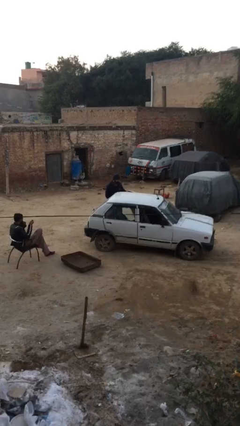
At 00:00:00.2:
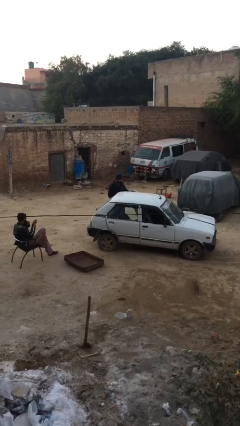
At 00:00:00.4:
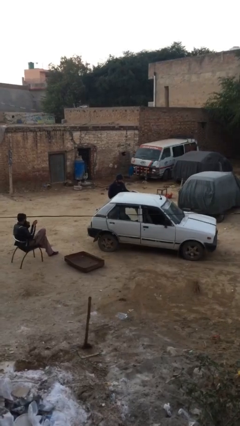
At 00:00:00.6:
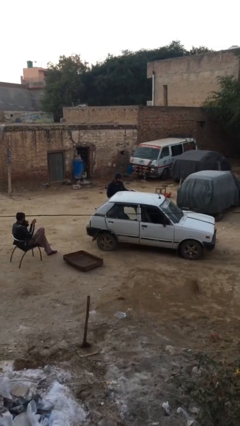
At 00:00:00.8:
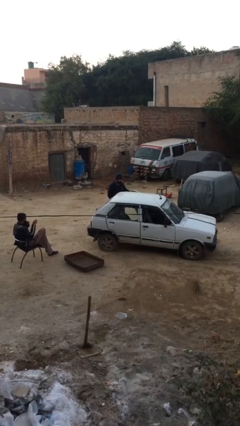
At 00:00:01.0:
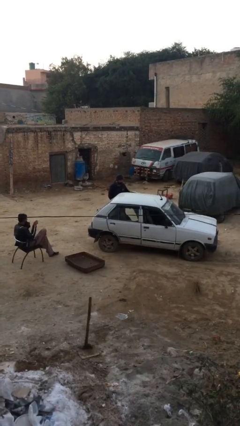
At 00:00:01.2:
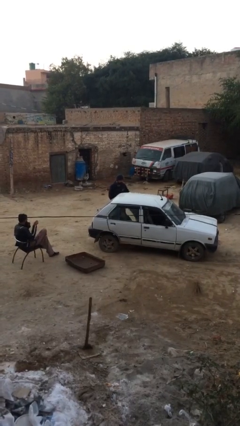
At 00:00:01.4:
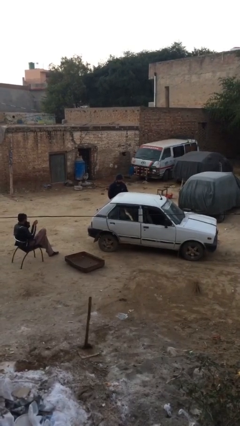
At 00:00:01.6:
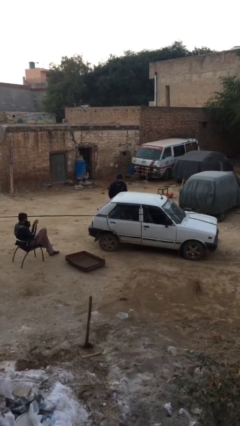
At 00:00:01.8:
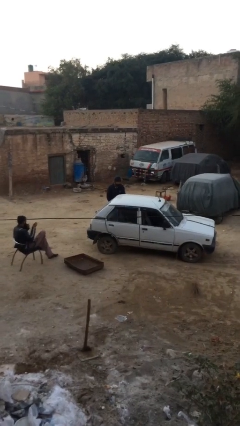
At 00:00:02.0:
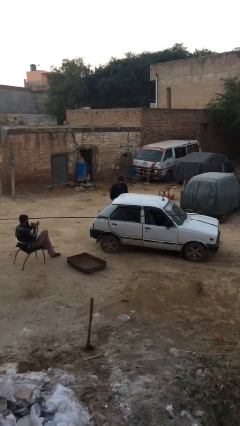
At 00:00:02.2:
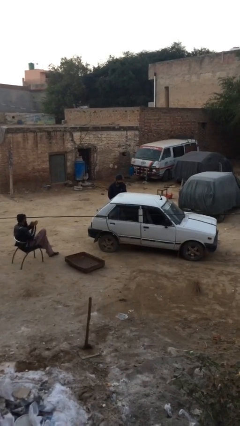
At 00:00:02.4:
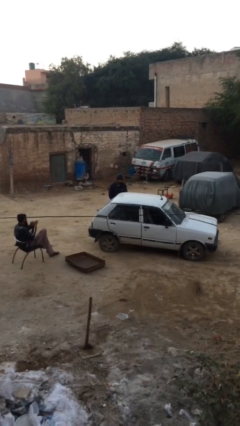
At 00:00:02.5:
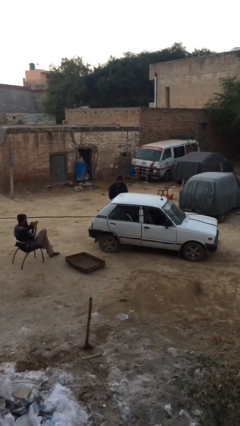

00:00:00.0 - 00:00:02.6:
person closes car door

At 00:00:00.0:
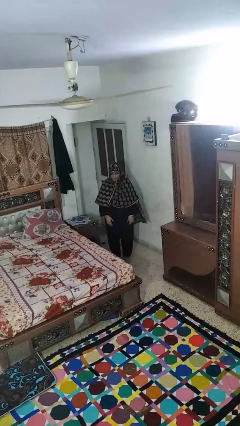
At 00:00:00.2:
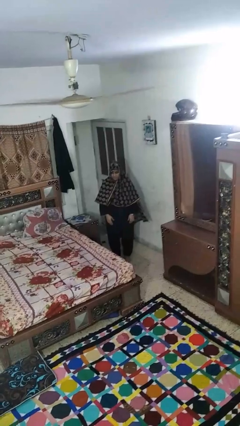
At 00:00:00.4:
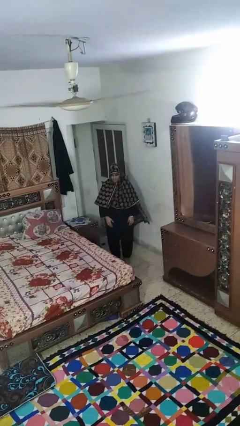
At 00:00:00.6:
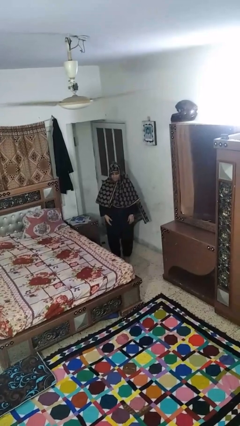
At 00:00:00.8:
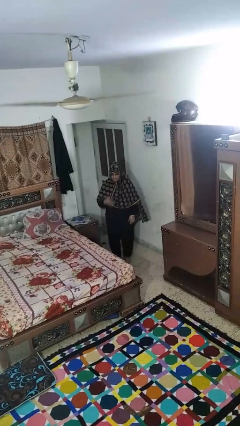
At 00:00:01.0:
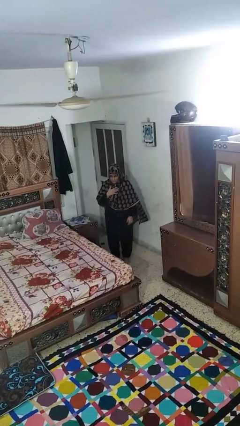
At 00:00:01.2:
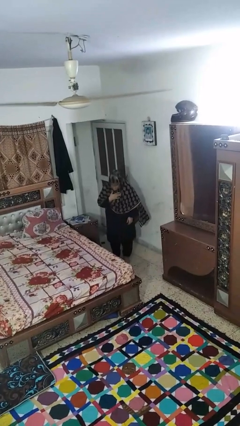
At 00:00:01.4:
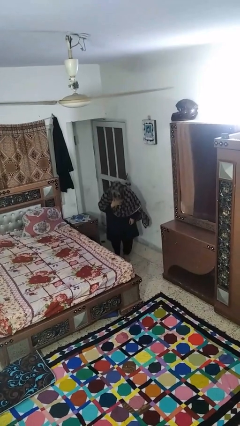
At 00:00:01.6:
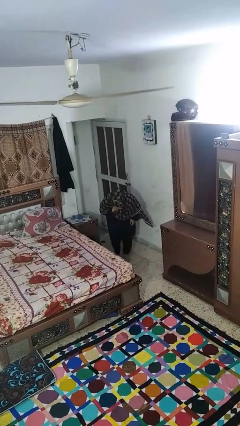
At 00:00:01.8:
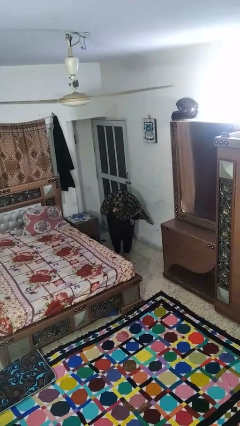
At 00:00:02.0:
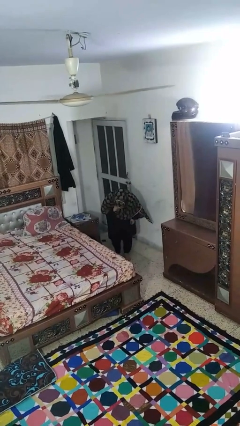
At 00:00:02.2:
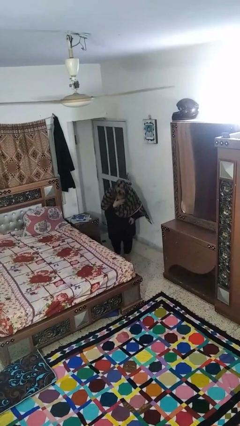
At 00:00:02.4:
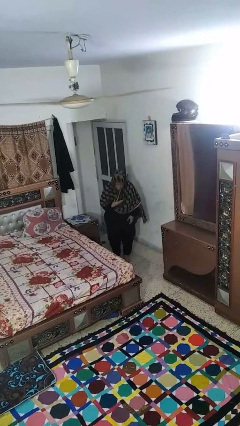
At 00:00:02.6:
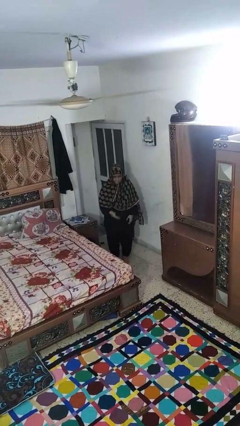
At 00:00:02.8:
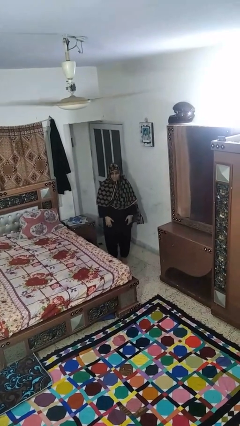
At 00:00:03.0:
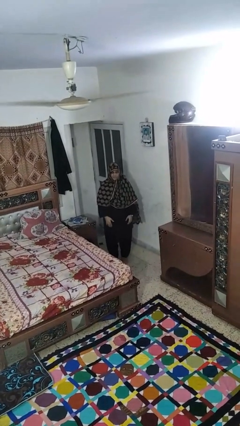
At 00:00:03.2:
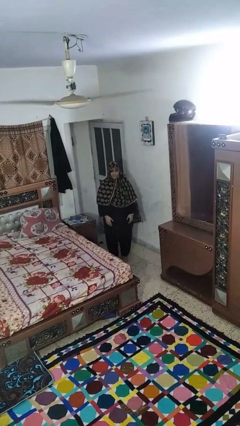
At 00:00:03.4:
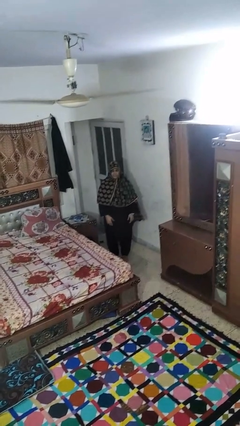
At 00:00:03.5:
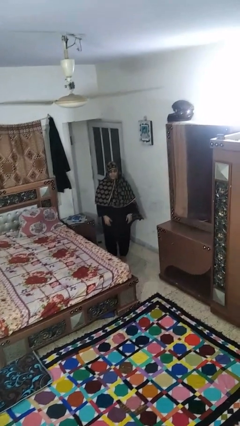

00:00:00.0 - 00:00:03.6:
person bows

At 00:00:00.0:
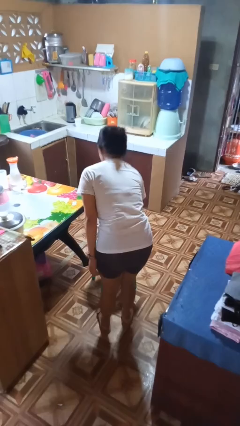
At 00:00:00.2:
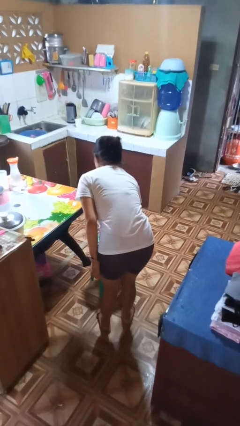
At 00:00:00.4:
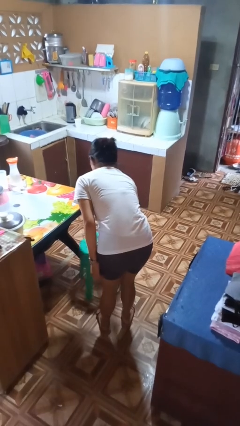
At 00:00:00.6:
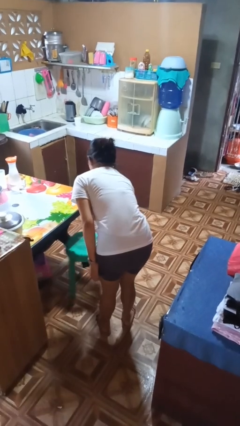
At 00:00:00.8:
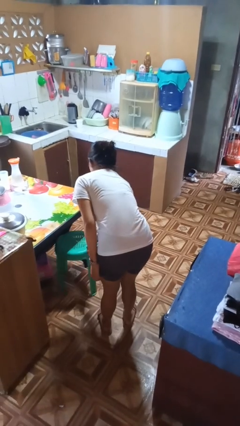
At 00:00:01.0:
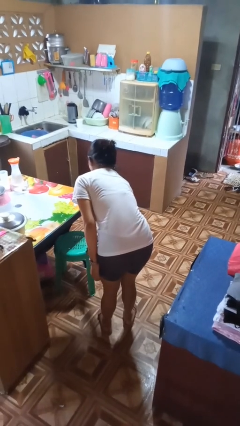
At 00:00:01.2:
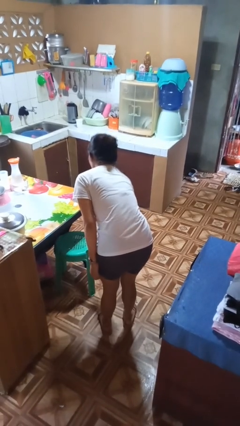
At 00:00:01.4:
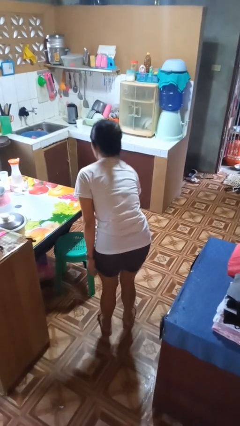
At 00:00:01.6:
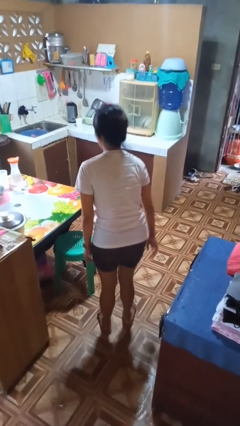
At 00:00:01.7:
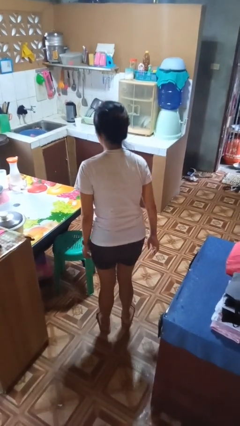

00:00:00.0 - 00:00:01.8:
person pushes in chair

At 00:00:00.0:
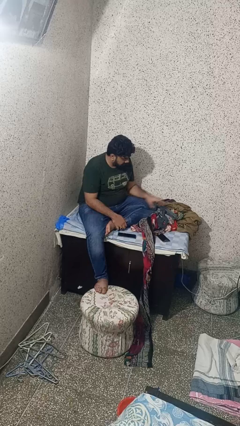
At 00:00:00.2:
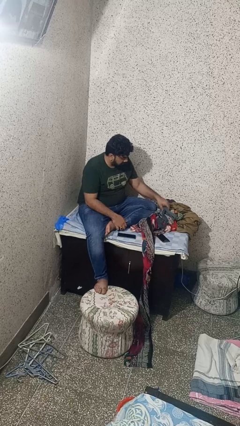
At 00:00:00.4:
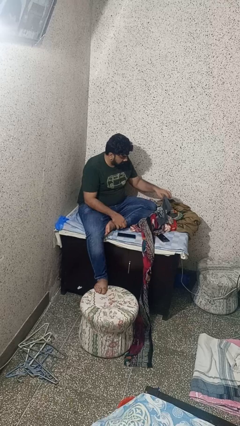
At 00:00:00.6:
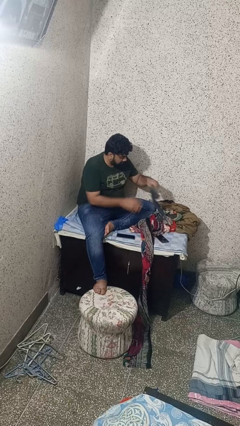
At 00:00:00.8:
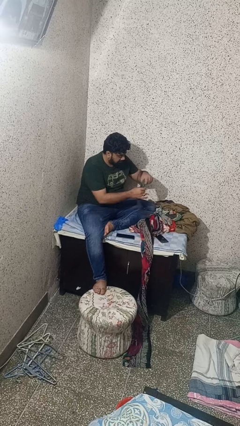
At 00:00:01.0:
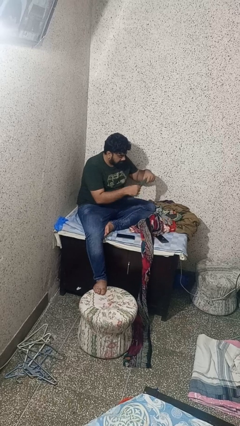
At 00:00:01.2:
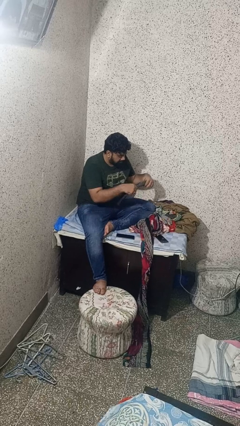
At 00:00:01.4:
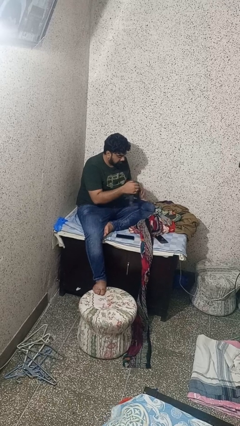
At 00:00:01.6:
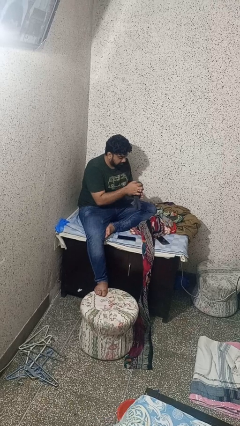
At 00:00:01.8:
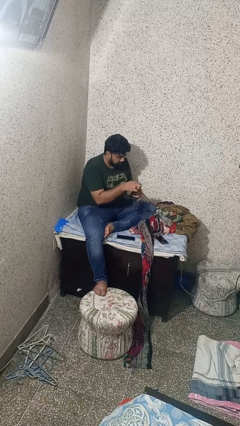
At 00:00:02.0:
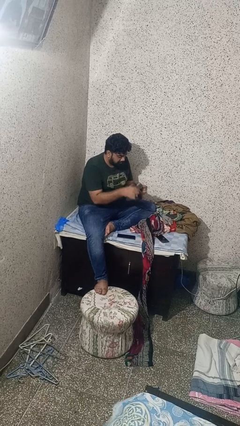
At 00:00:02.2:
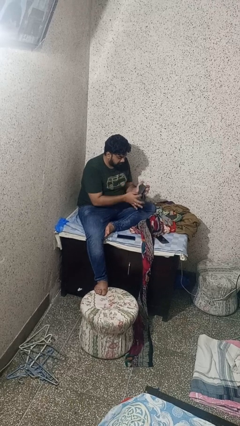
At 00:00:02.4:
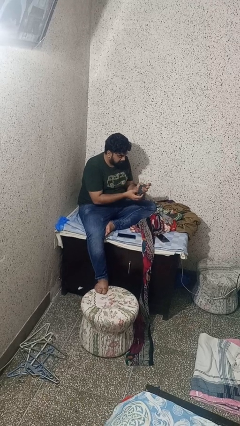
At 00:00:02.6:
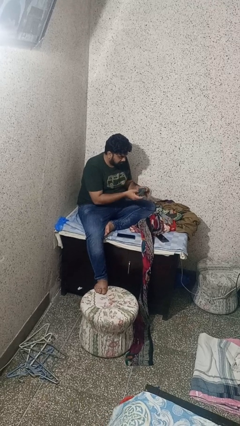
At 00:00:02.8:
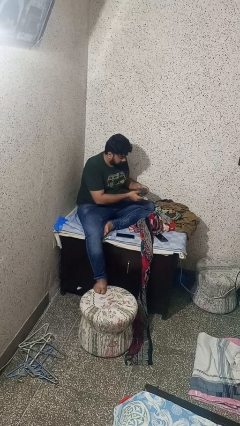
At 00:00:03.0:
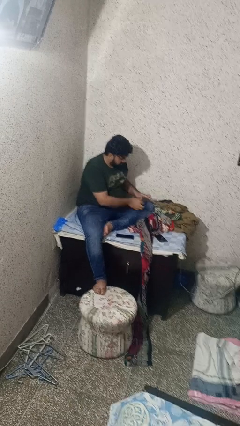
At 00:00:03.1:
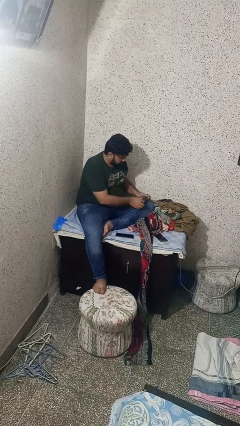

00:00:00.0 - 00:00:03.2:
person folds socks

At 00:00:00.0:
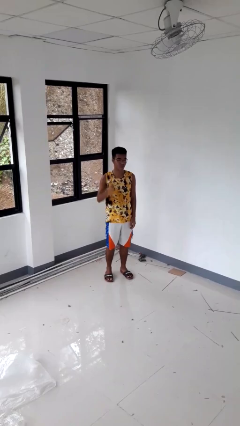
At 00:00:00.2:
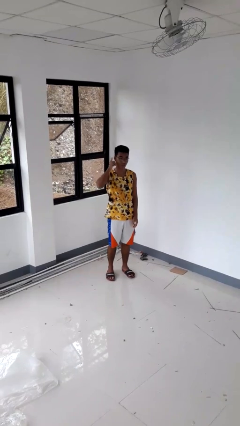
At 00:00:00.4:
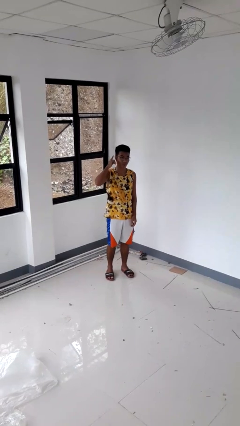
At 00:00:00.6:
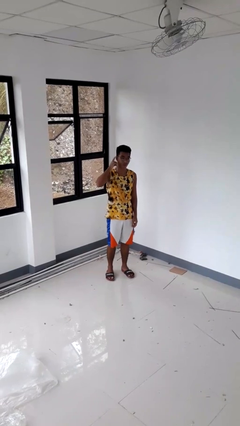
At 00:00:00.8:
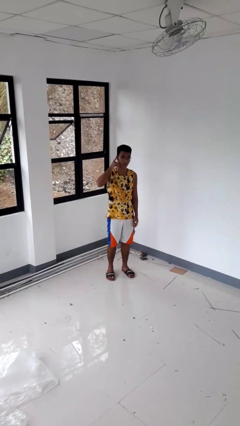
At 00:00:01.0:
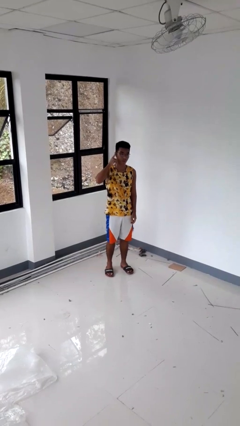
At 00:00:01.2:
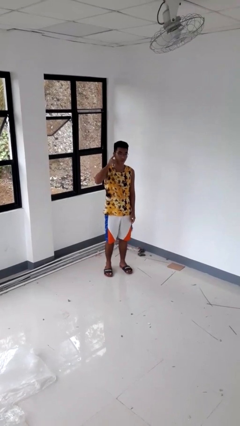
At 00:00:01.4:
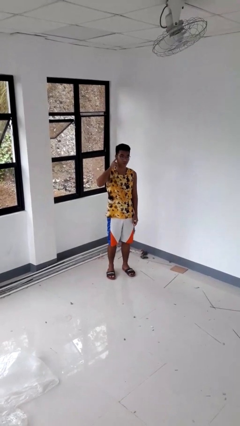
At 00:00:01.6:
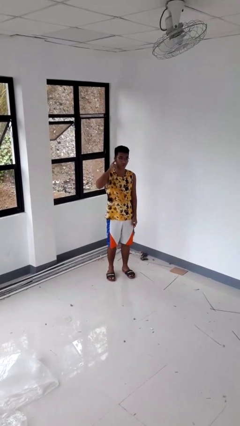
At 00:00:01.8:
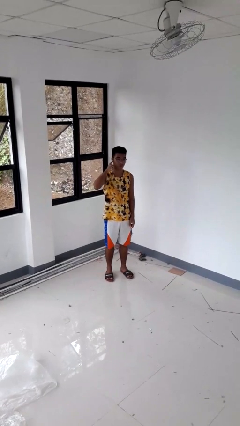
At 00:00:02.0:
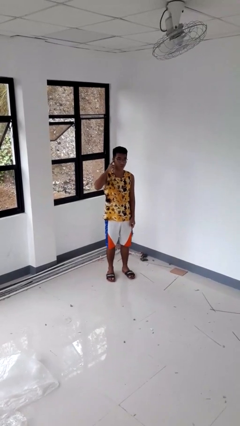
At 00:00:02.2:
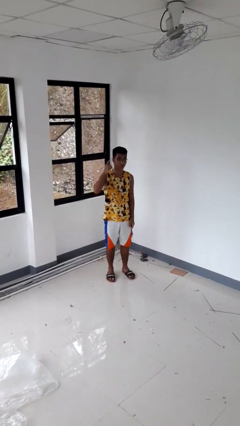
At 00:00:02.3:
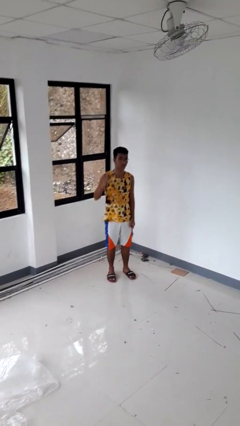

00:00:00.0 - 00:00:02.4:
person gestures listen closely

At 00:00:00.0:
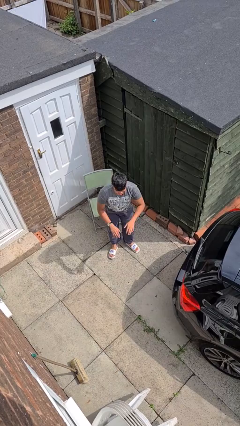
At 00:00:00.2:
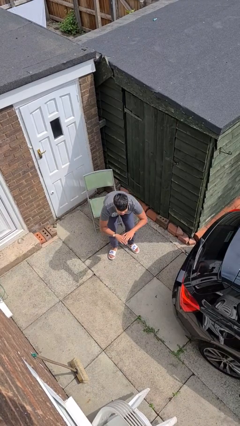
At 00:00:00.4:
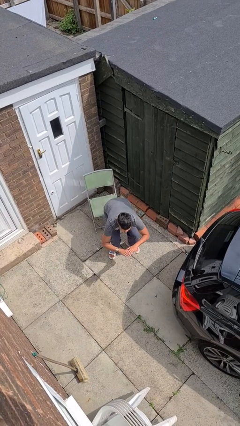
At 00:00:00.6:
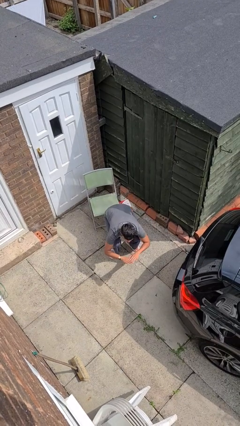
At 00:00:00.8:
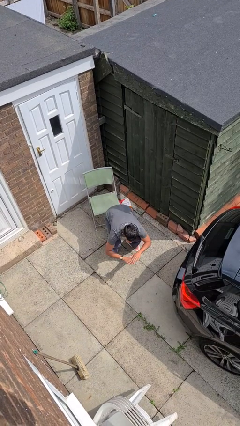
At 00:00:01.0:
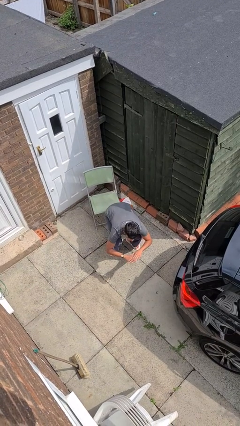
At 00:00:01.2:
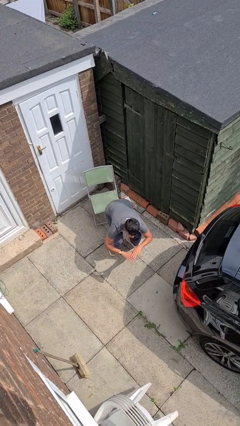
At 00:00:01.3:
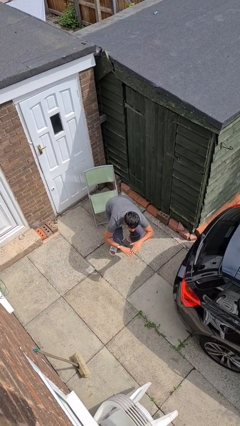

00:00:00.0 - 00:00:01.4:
person squats
